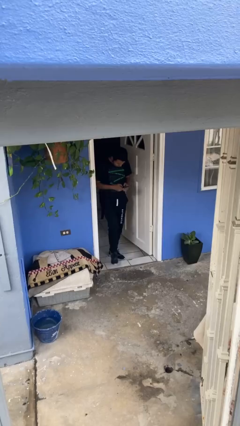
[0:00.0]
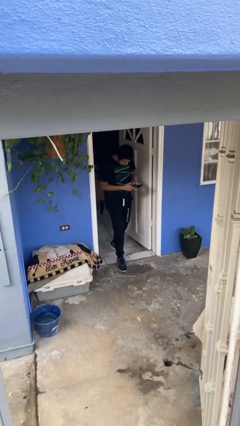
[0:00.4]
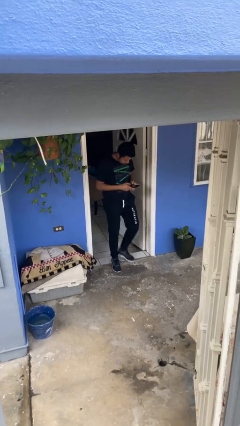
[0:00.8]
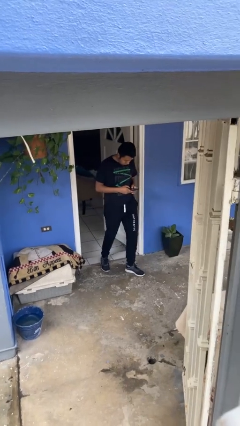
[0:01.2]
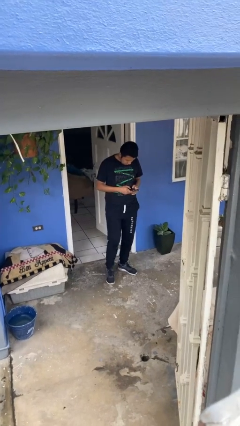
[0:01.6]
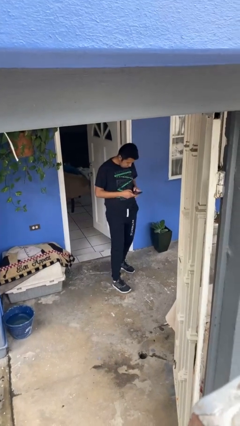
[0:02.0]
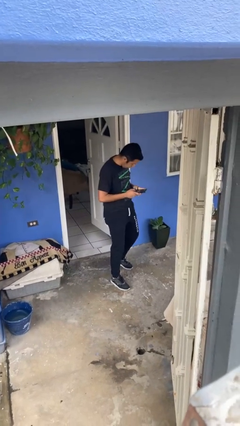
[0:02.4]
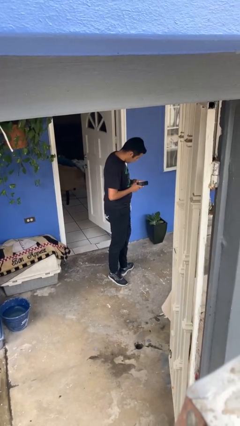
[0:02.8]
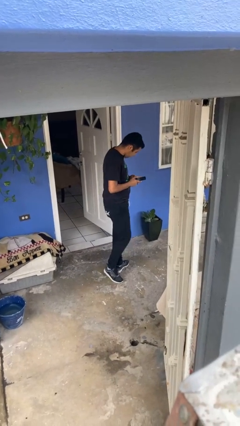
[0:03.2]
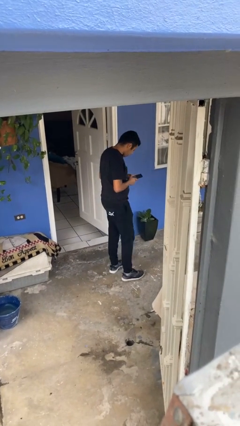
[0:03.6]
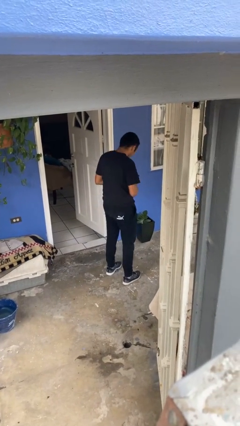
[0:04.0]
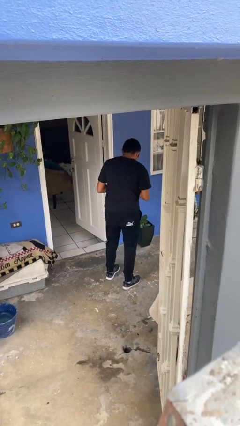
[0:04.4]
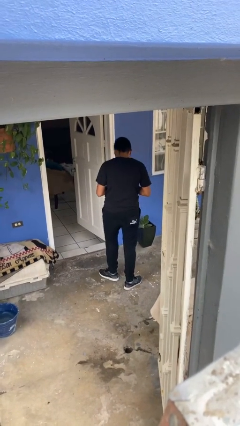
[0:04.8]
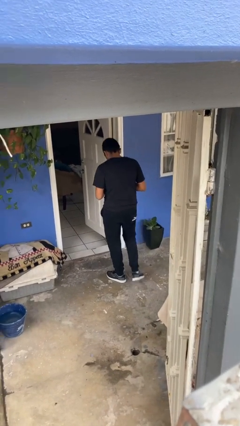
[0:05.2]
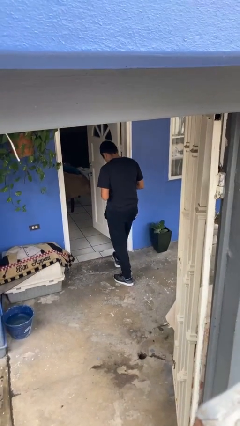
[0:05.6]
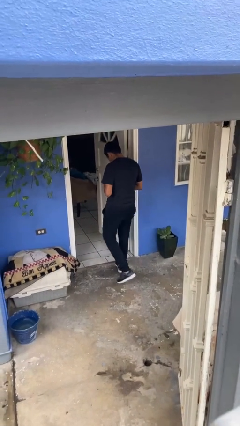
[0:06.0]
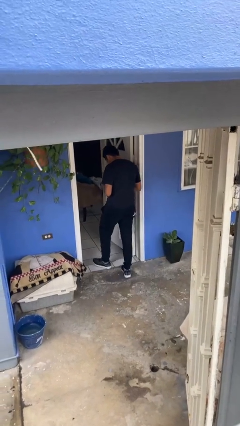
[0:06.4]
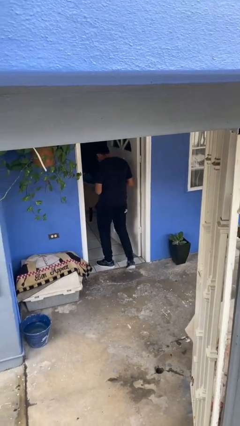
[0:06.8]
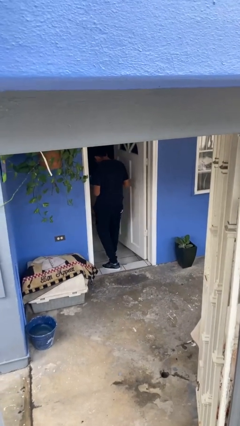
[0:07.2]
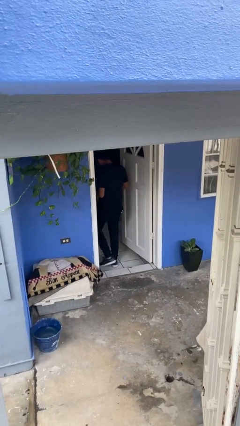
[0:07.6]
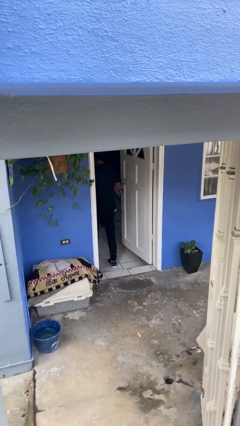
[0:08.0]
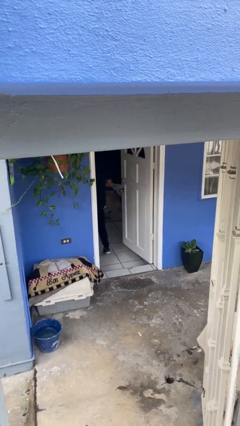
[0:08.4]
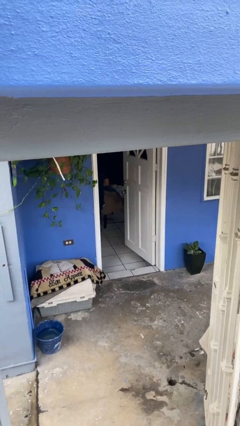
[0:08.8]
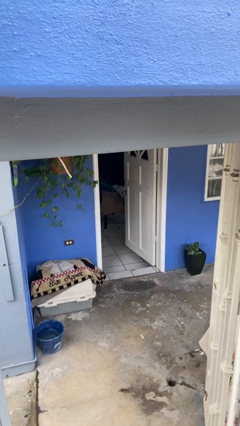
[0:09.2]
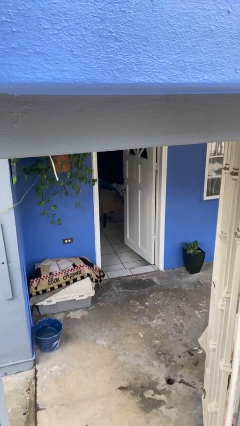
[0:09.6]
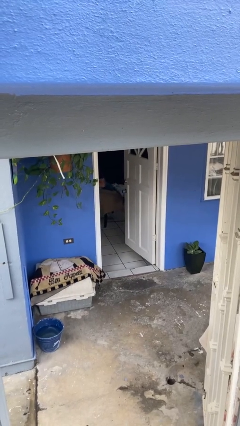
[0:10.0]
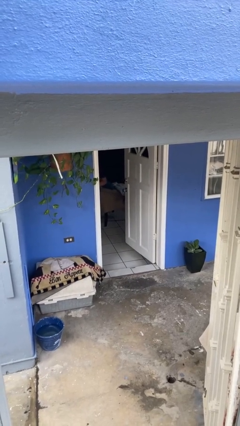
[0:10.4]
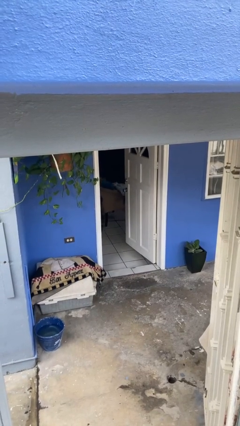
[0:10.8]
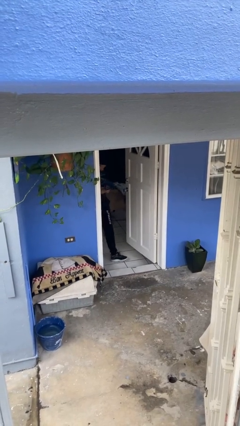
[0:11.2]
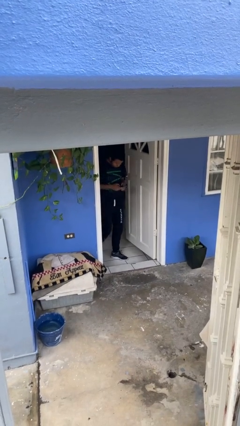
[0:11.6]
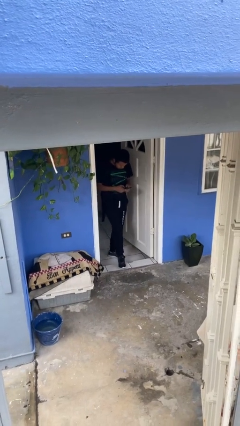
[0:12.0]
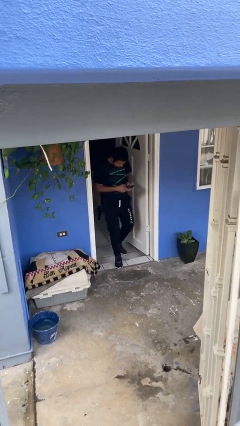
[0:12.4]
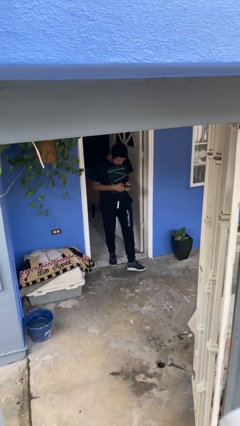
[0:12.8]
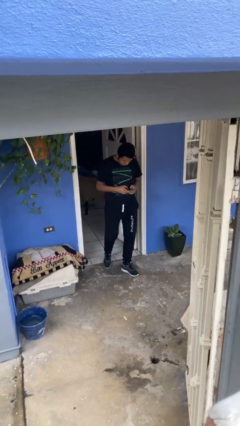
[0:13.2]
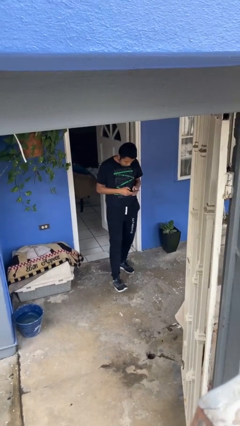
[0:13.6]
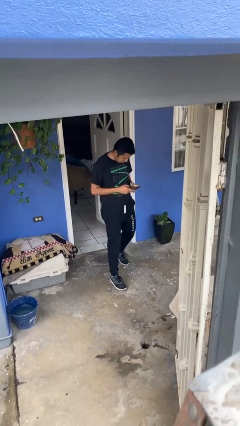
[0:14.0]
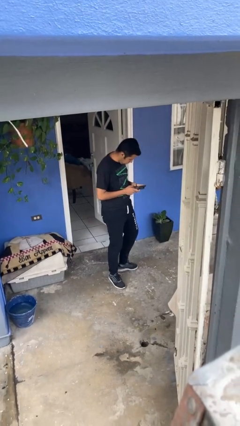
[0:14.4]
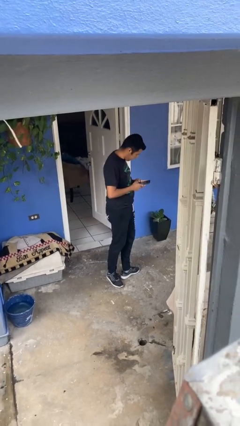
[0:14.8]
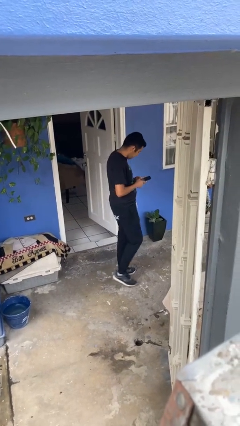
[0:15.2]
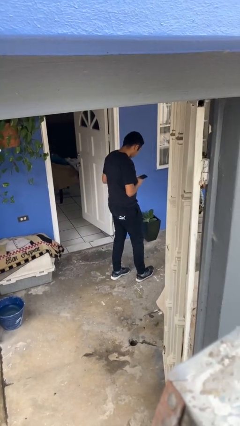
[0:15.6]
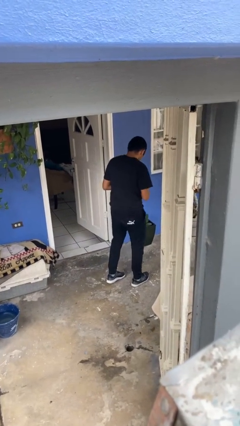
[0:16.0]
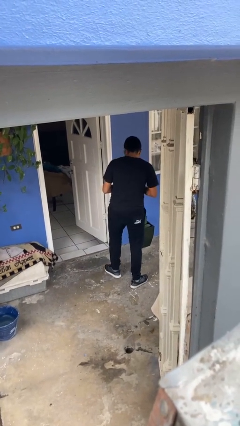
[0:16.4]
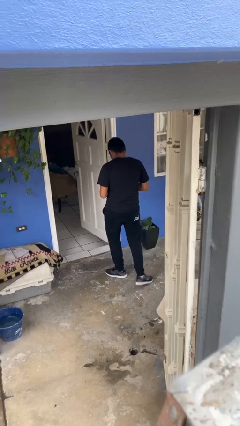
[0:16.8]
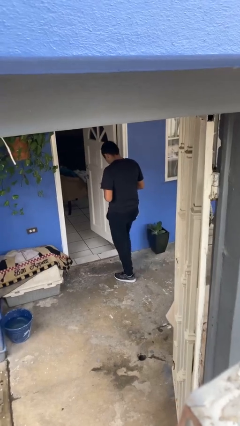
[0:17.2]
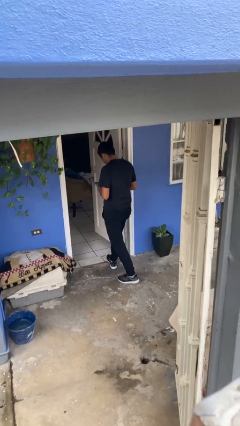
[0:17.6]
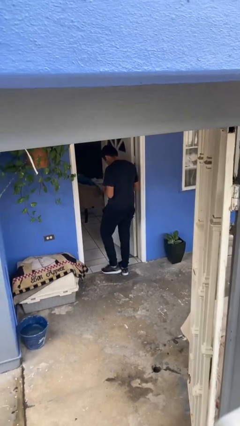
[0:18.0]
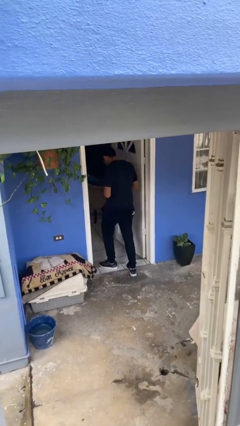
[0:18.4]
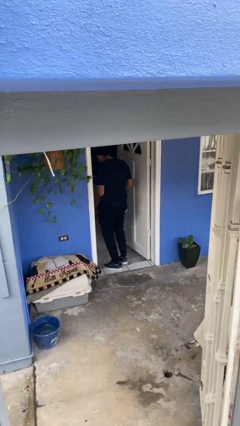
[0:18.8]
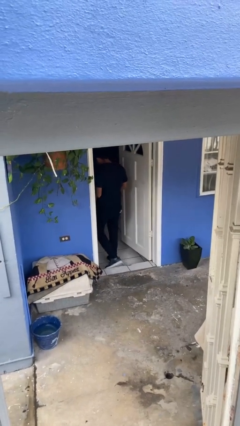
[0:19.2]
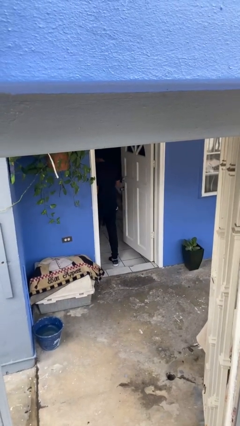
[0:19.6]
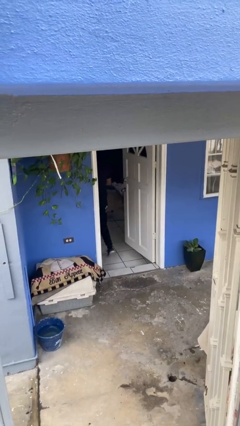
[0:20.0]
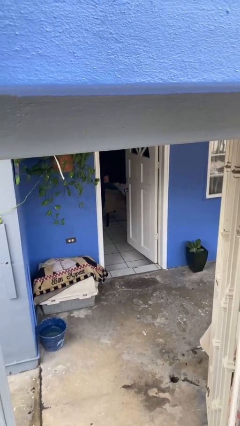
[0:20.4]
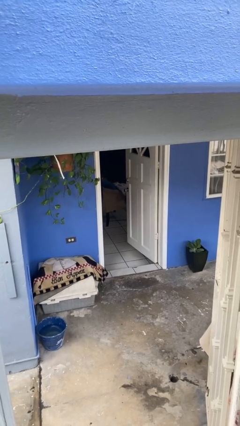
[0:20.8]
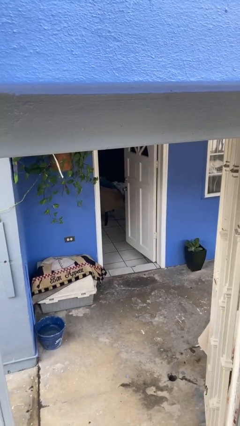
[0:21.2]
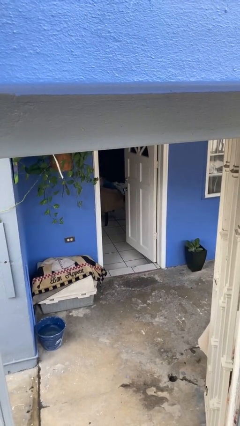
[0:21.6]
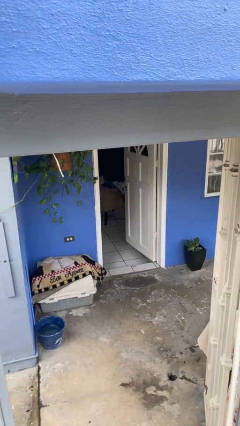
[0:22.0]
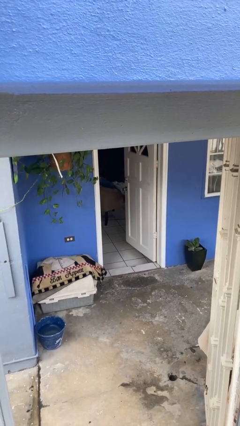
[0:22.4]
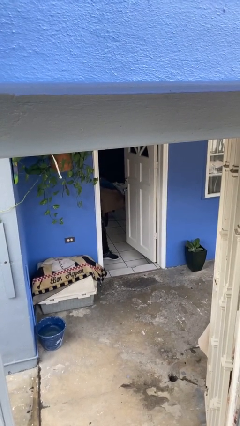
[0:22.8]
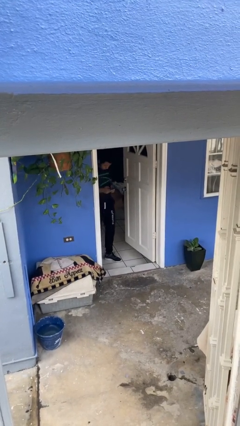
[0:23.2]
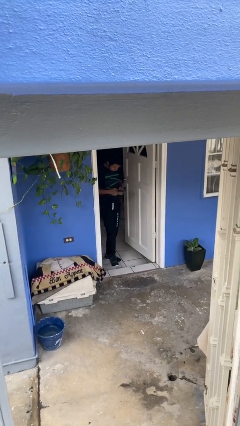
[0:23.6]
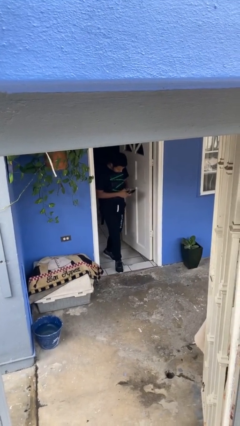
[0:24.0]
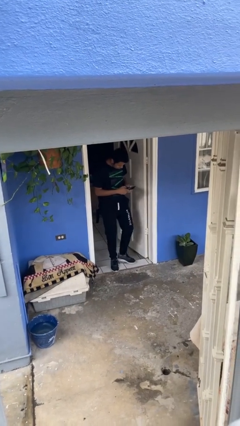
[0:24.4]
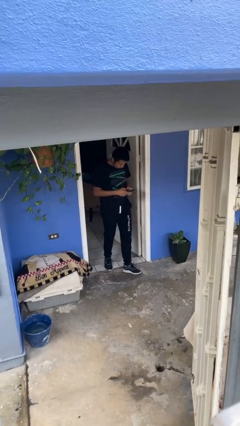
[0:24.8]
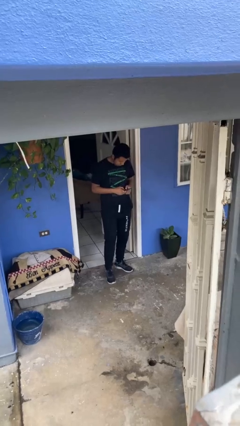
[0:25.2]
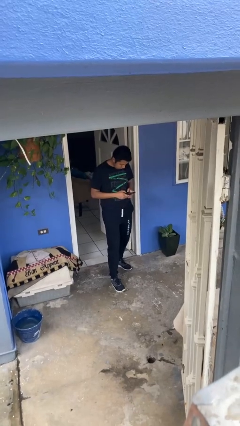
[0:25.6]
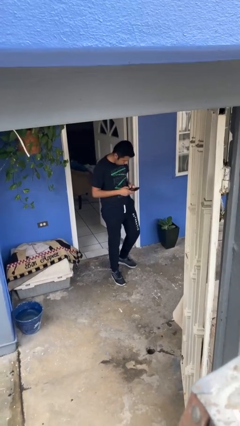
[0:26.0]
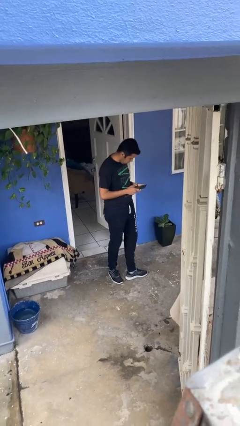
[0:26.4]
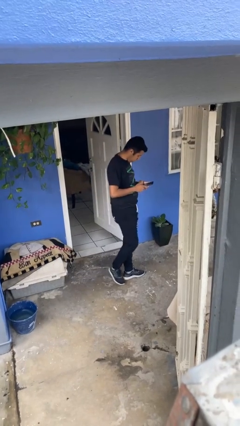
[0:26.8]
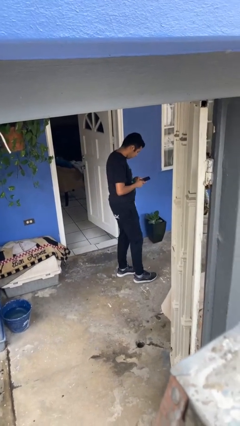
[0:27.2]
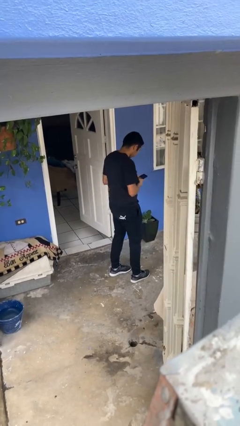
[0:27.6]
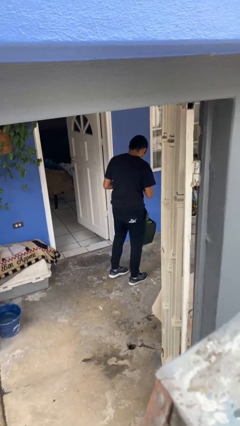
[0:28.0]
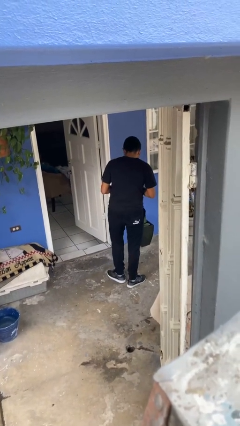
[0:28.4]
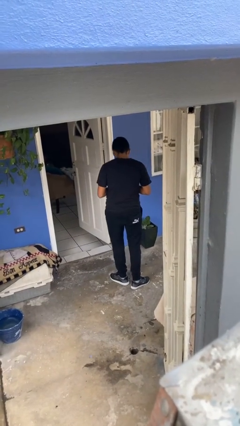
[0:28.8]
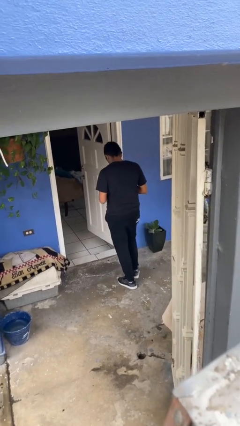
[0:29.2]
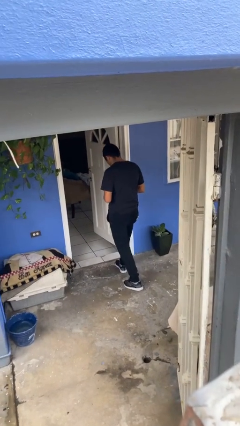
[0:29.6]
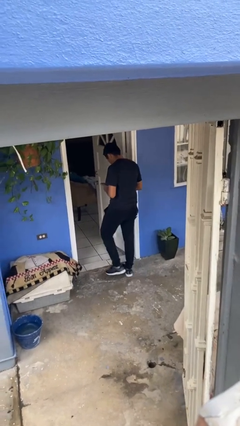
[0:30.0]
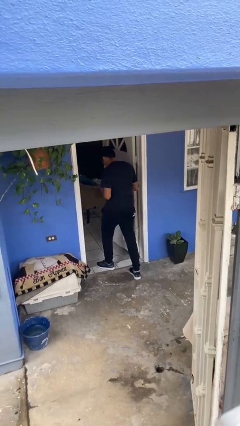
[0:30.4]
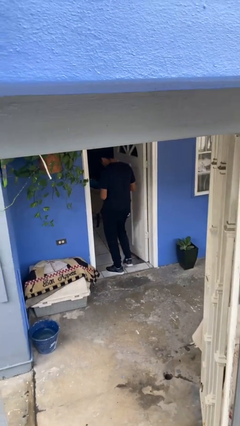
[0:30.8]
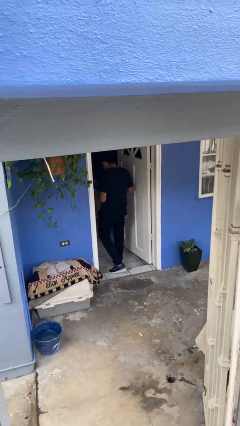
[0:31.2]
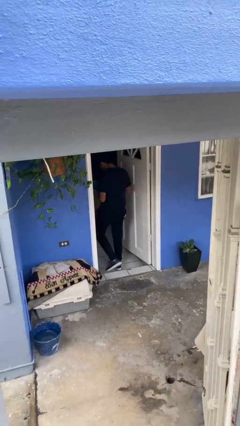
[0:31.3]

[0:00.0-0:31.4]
person texts on phone

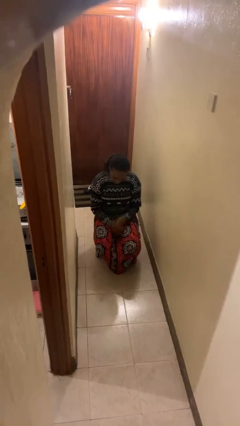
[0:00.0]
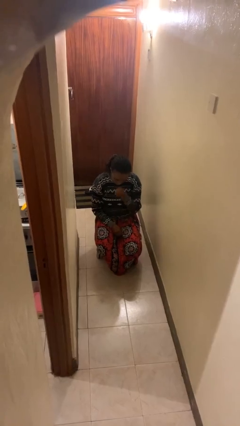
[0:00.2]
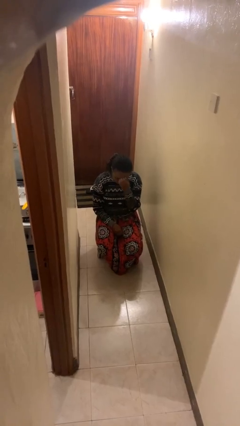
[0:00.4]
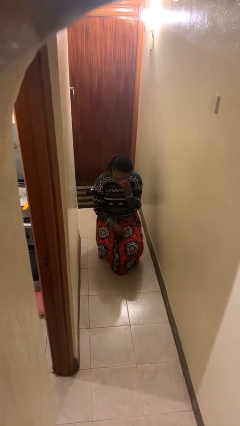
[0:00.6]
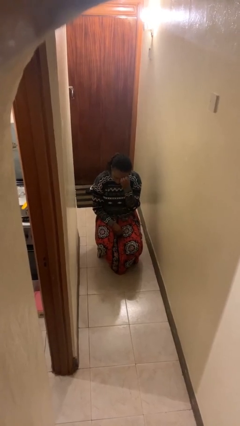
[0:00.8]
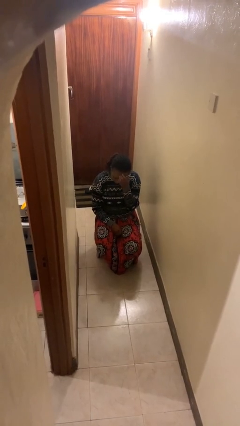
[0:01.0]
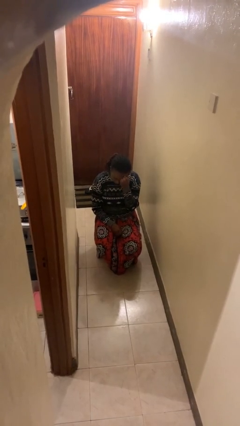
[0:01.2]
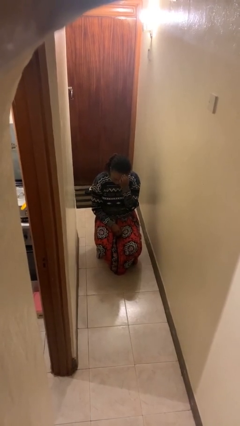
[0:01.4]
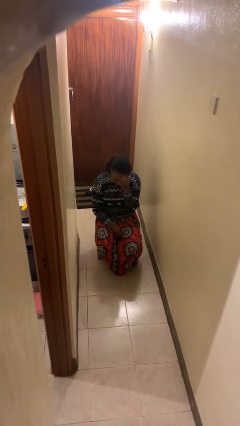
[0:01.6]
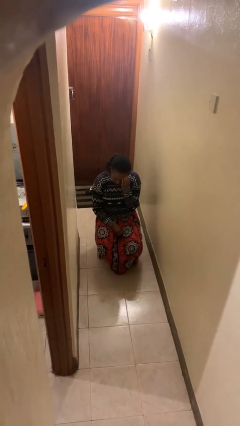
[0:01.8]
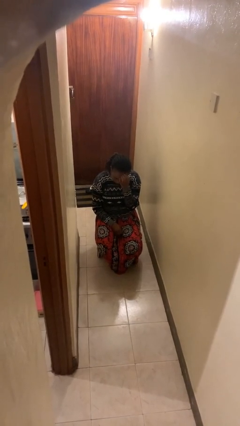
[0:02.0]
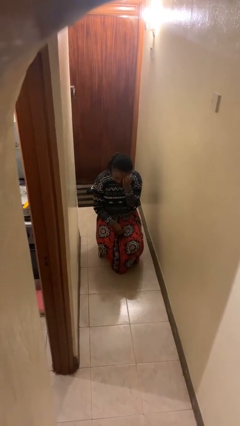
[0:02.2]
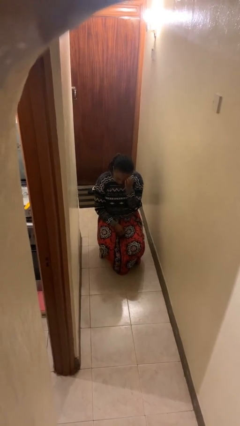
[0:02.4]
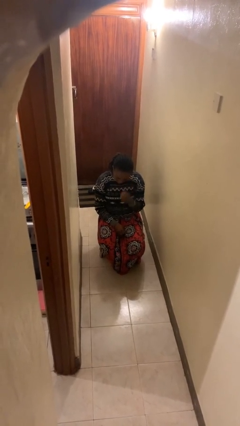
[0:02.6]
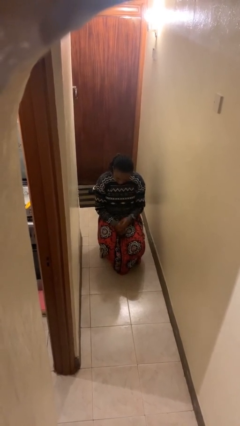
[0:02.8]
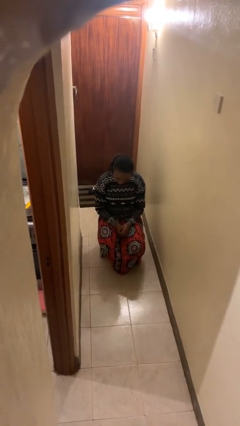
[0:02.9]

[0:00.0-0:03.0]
person scratches face
